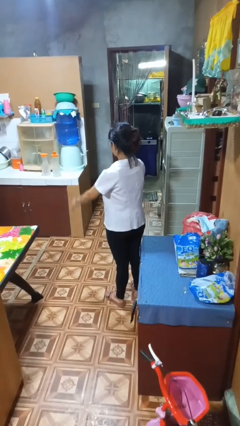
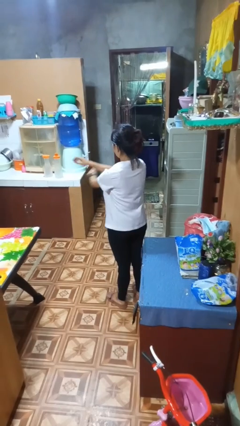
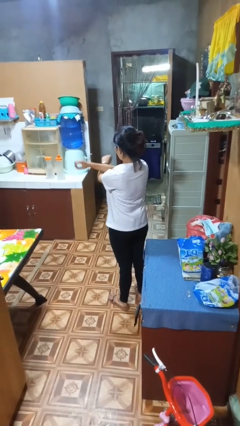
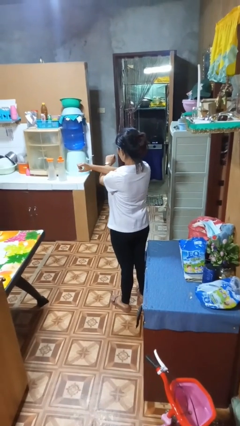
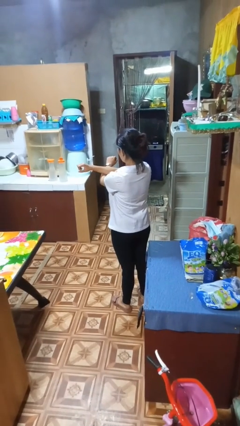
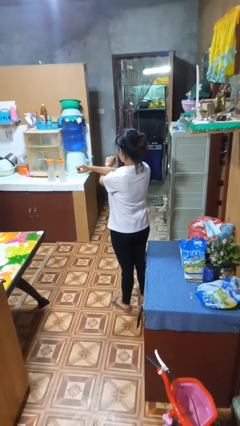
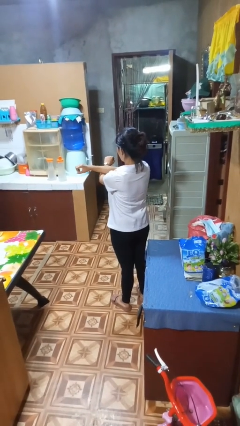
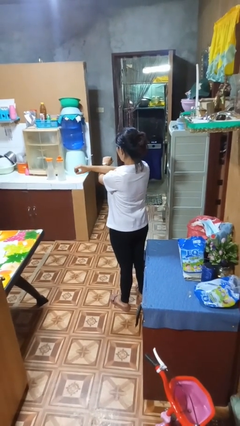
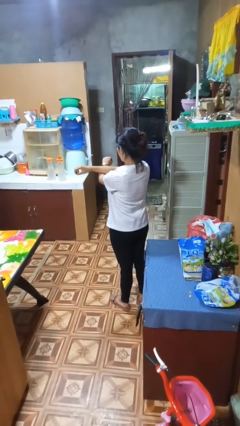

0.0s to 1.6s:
person crosses arms

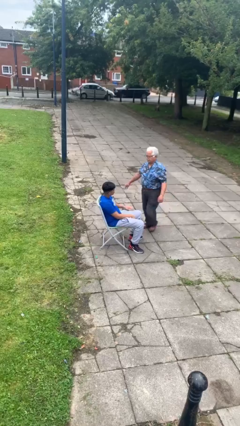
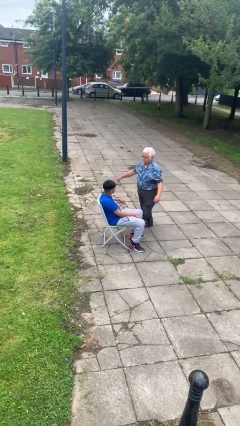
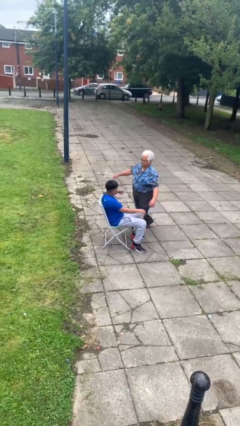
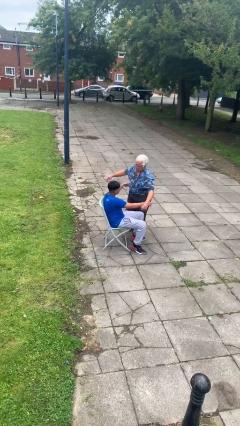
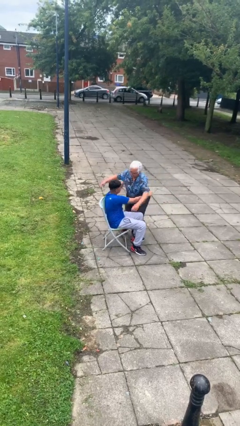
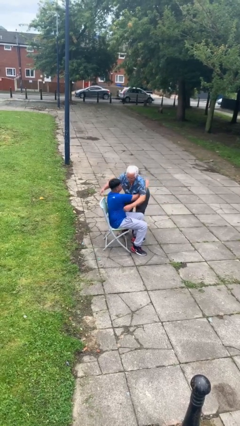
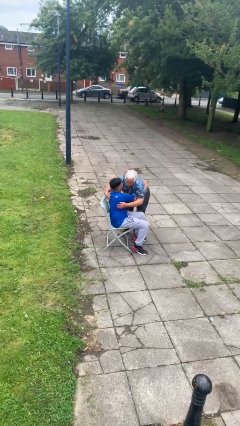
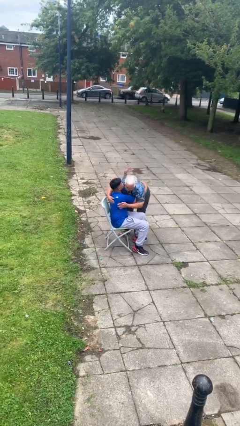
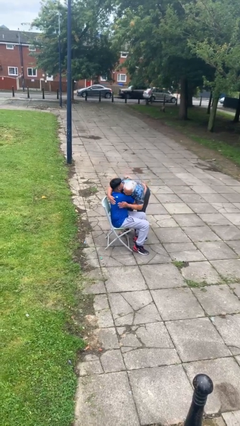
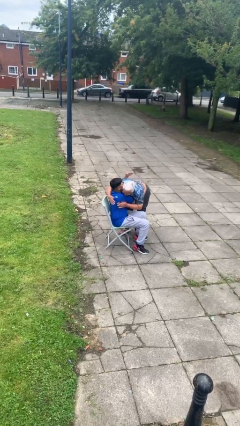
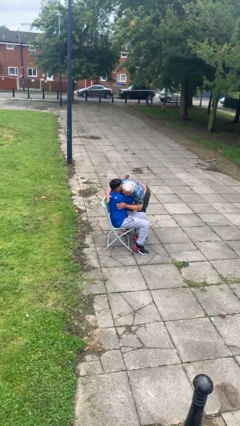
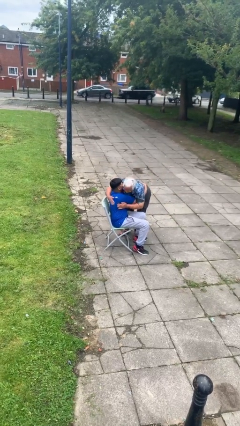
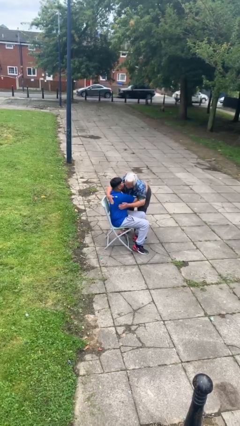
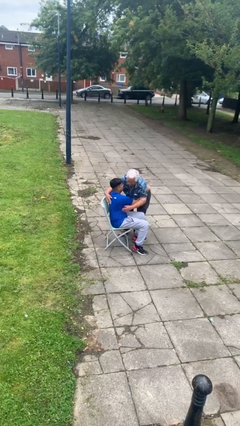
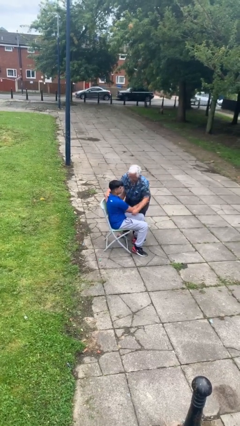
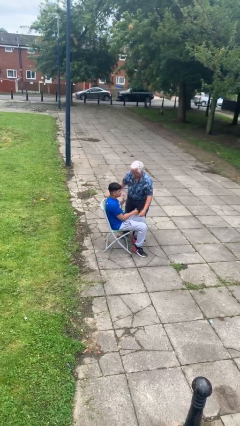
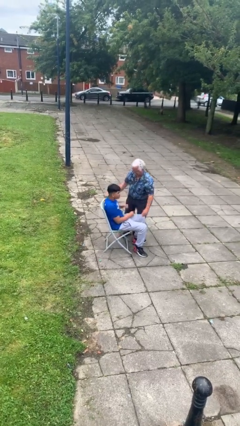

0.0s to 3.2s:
person embraces person

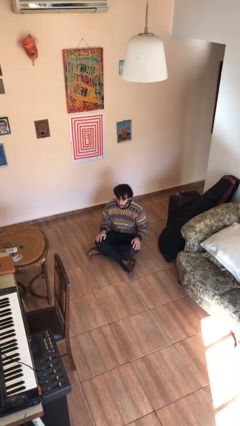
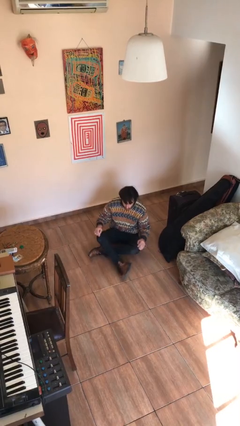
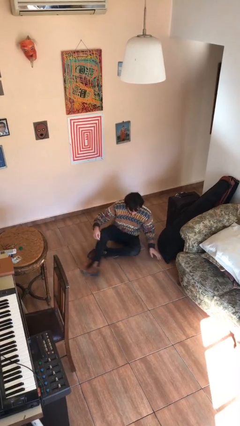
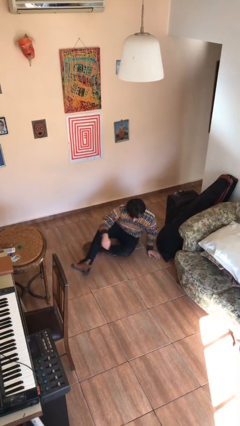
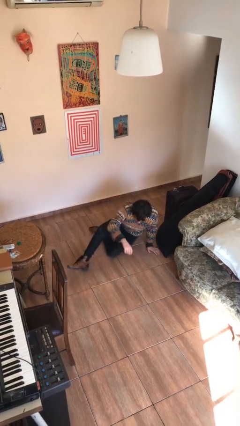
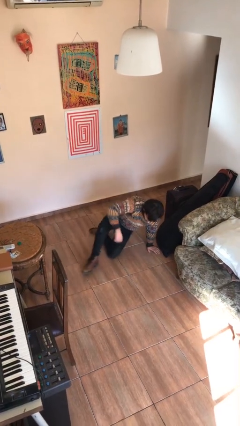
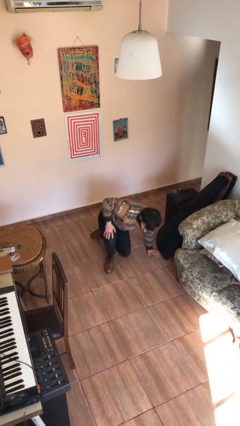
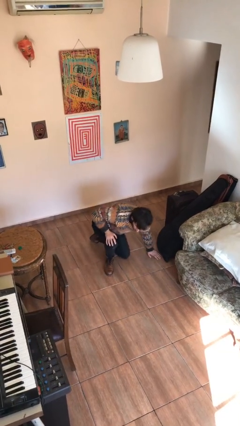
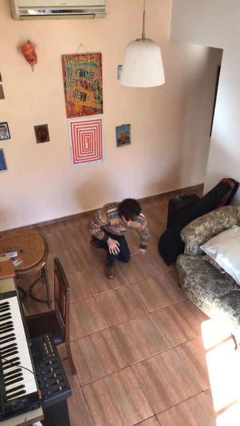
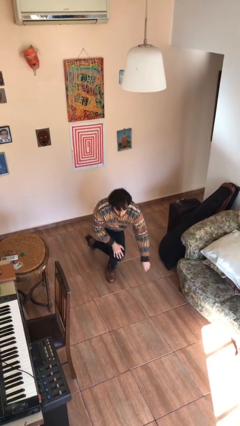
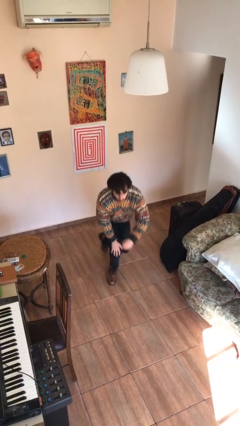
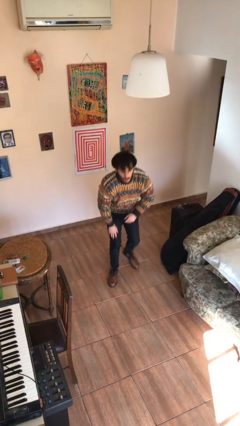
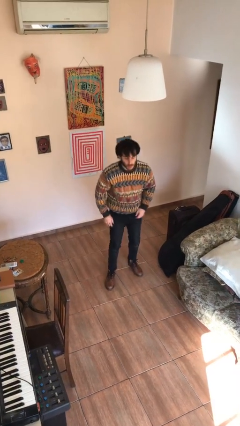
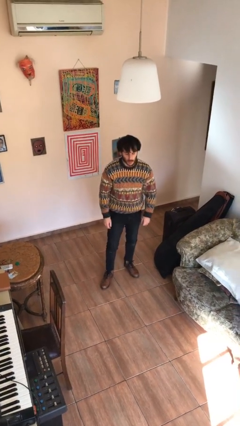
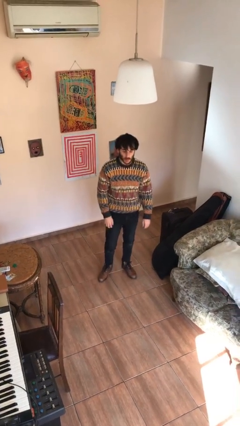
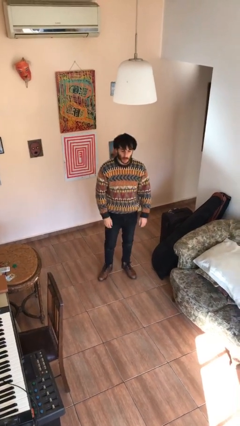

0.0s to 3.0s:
person stands up from floor

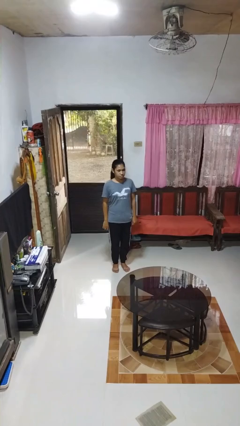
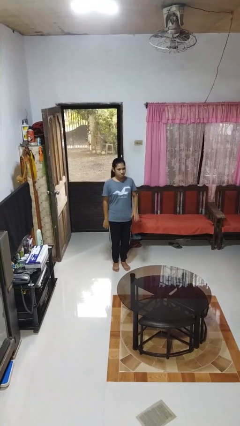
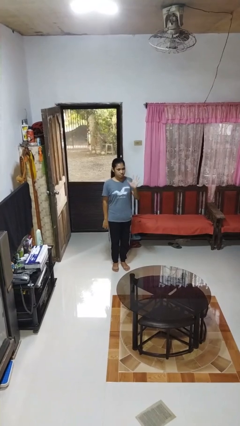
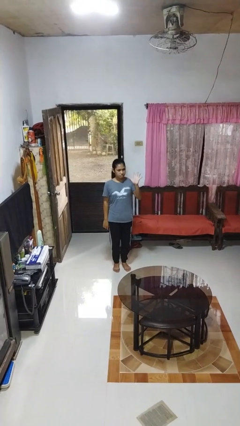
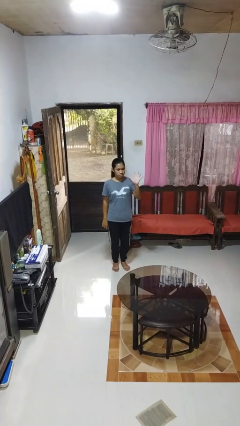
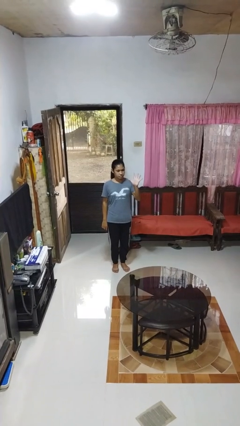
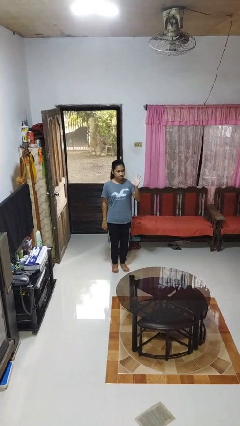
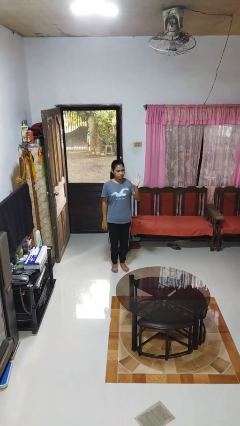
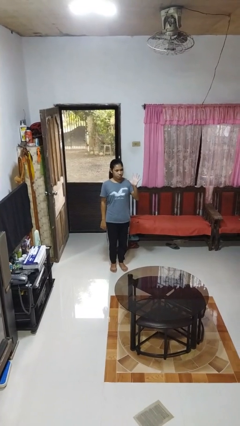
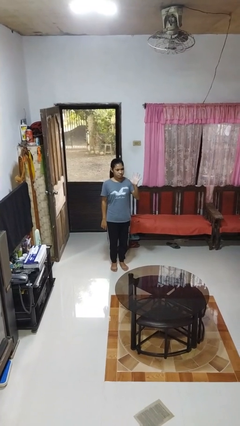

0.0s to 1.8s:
person gestures number five

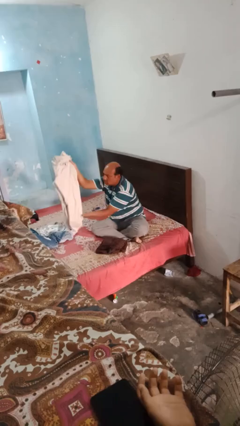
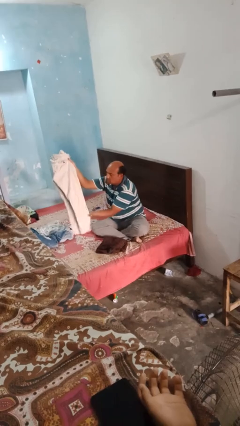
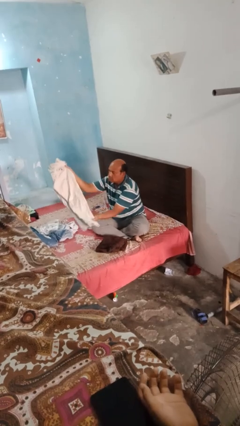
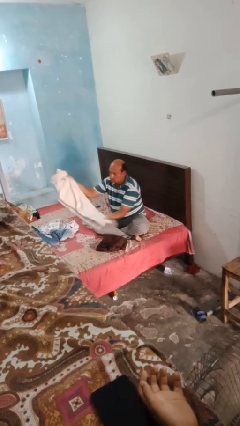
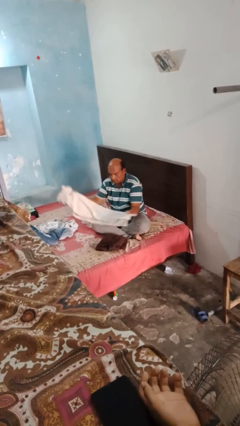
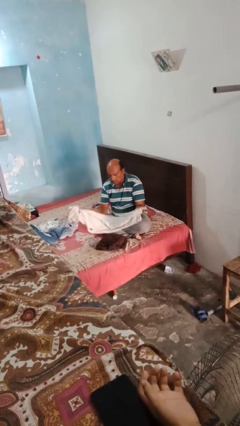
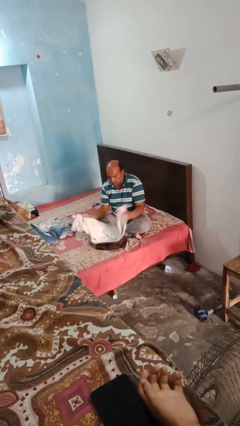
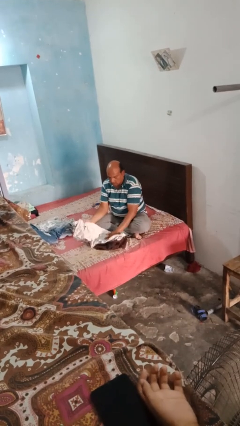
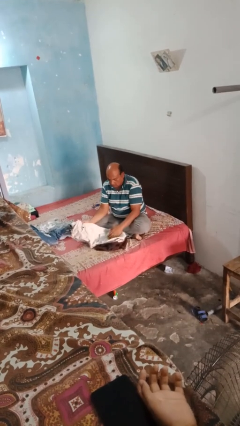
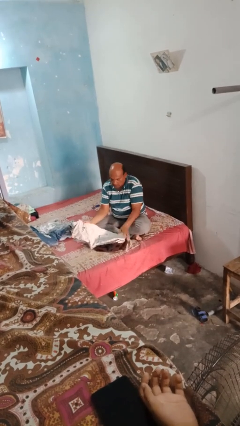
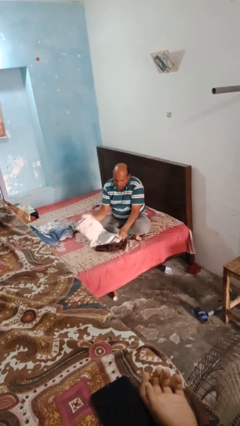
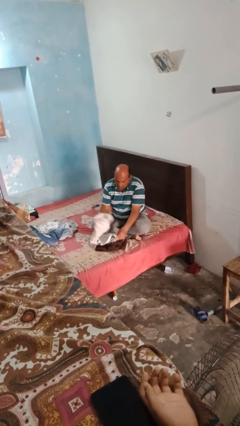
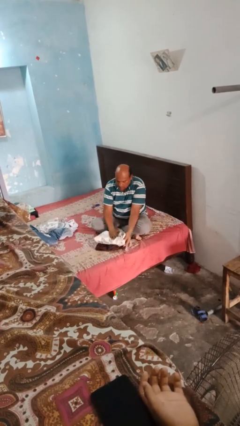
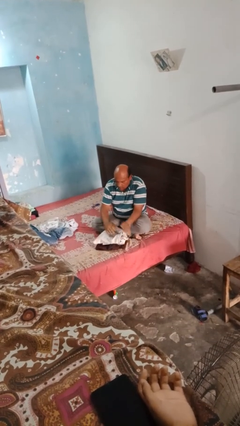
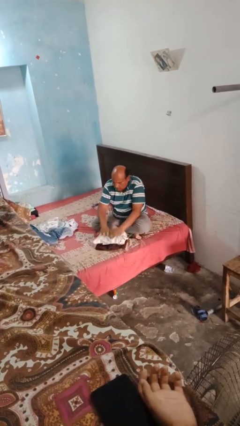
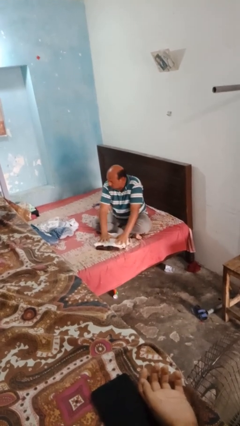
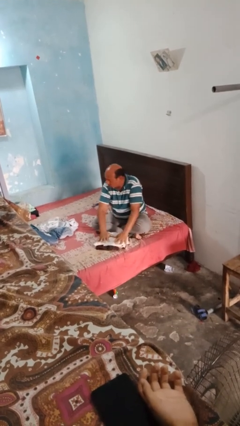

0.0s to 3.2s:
person folds pants

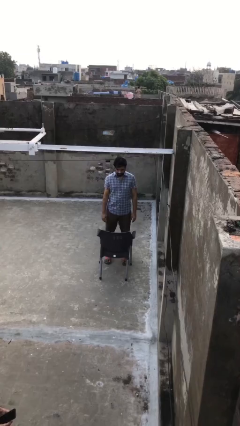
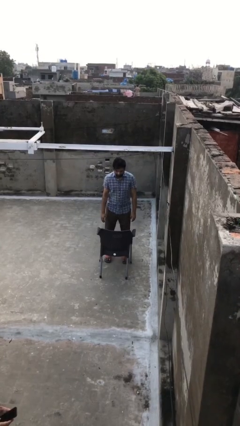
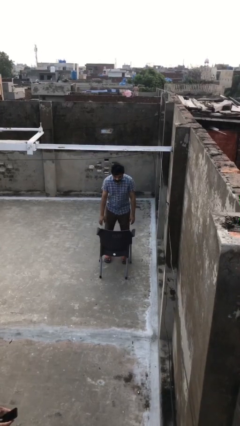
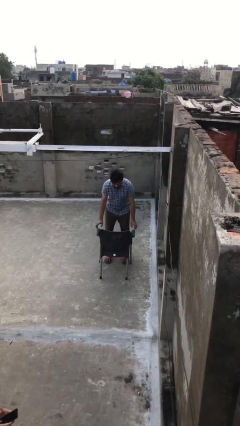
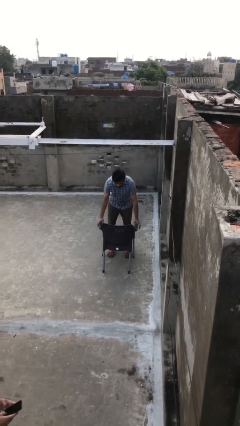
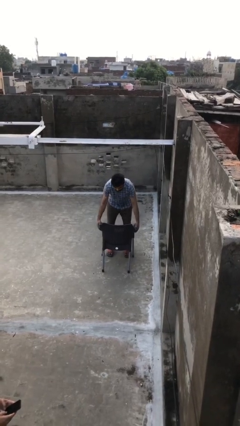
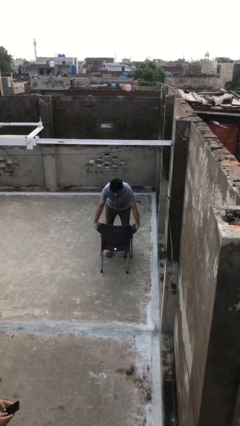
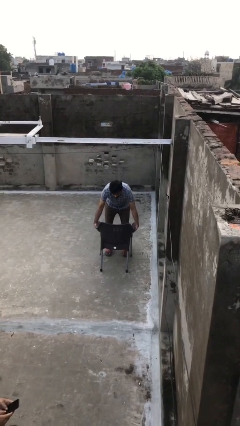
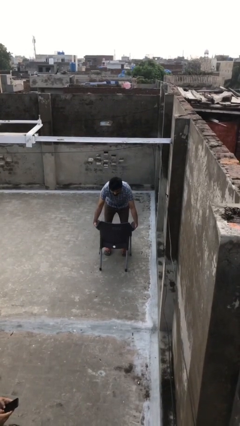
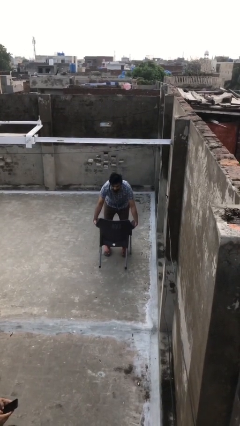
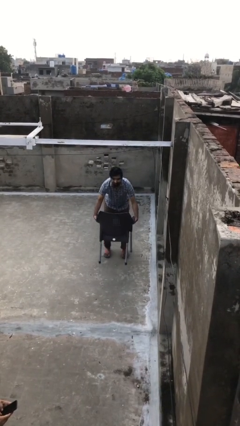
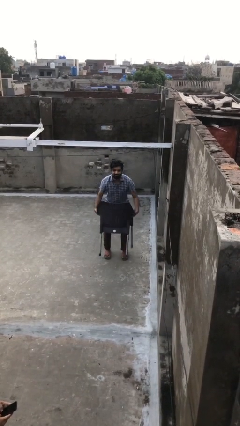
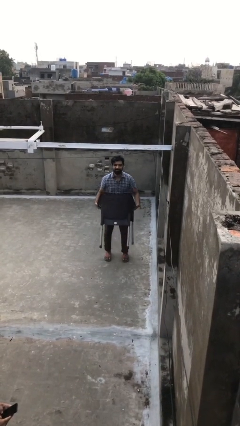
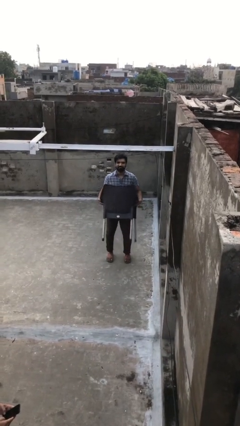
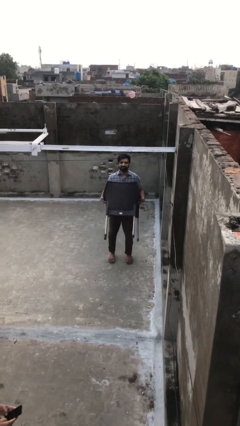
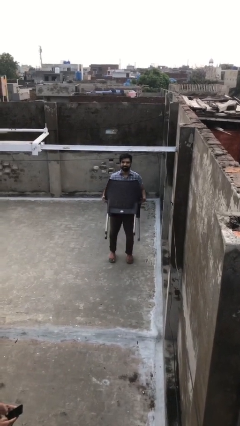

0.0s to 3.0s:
person picks up object from floor

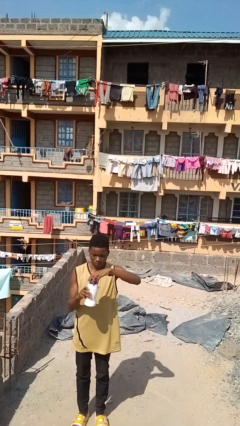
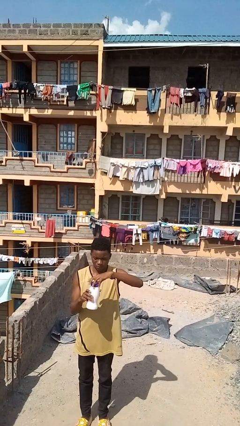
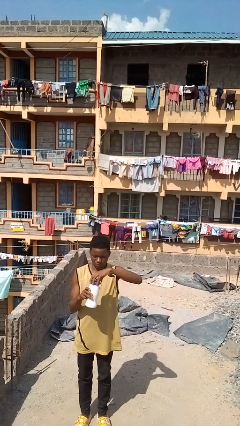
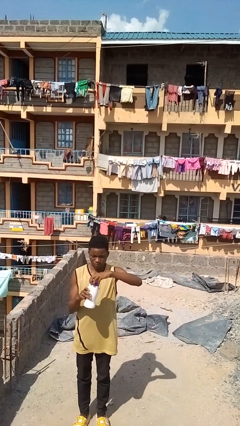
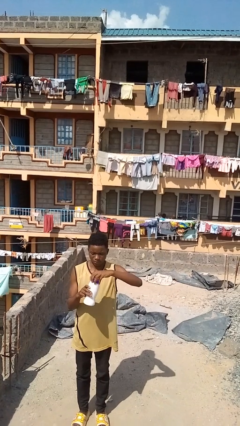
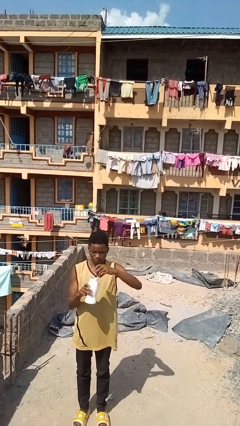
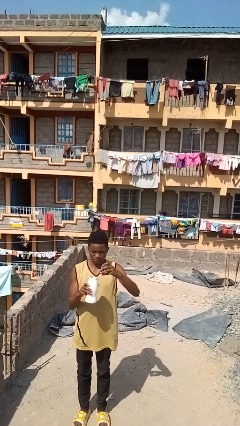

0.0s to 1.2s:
person opens beverage can

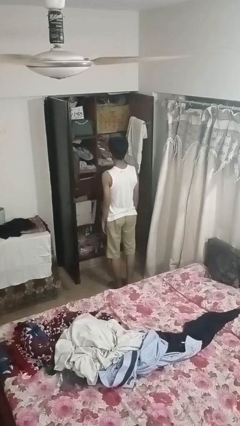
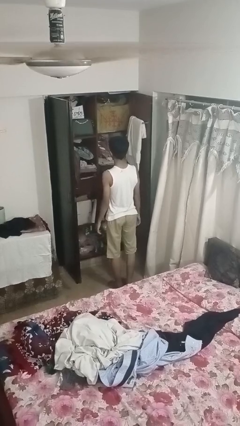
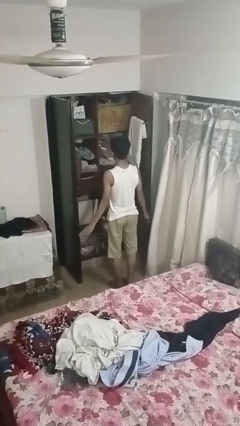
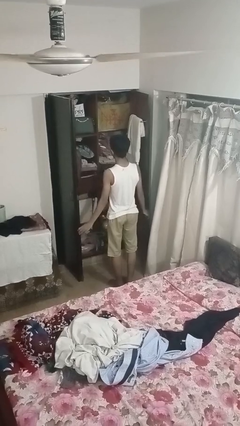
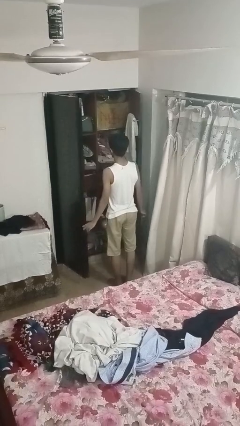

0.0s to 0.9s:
person closes closet door
